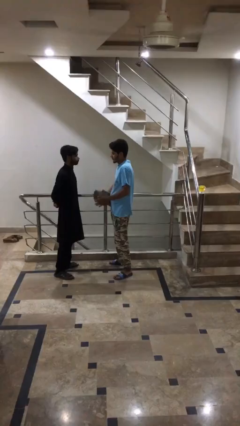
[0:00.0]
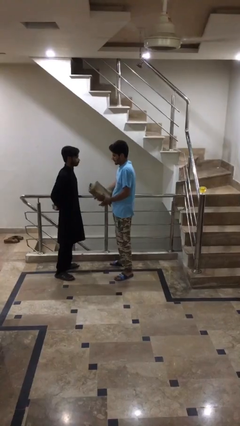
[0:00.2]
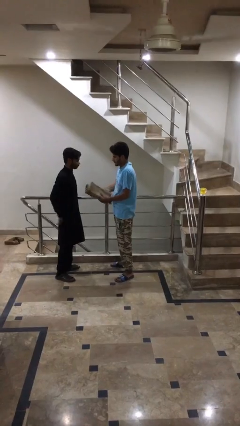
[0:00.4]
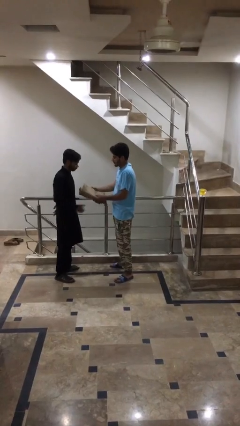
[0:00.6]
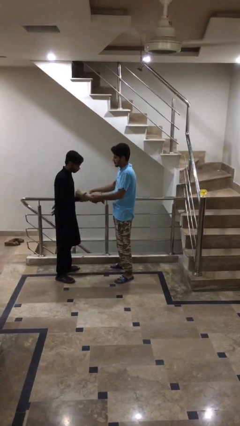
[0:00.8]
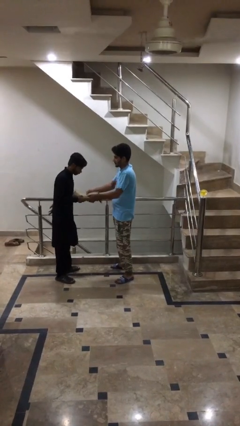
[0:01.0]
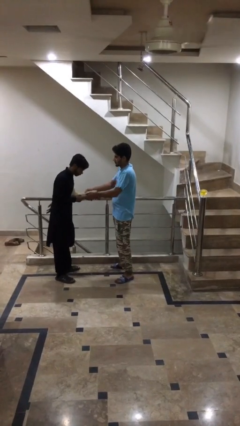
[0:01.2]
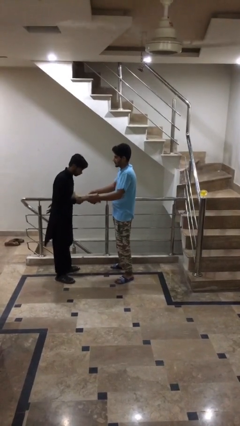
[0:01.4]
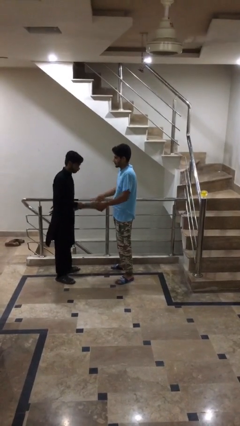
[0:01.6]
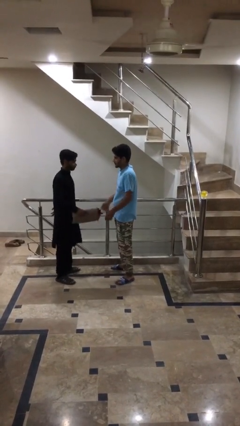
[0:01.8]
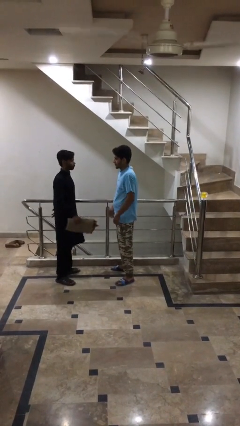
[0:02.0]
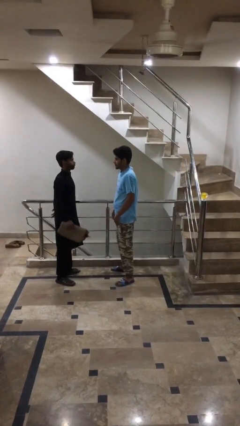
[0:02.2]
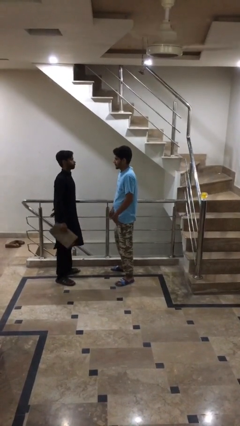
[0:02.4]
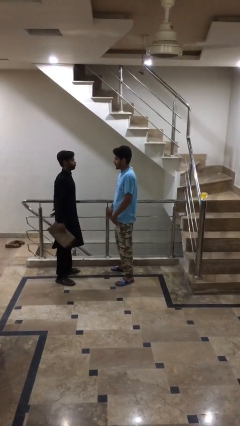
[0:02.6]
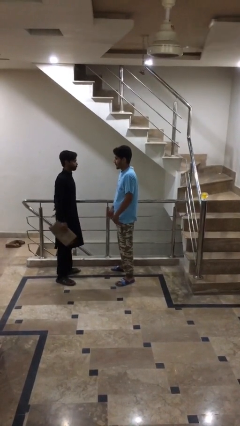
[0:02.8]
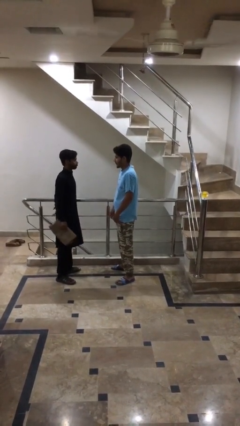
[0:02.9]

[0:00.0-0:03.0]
person transfers object to person

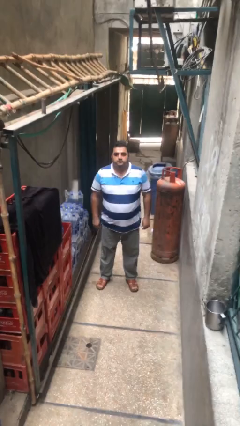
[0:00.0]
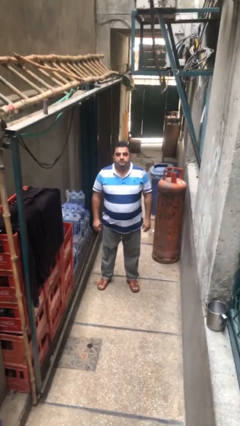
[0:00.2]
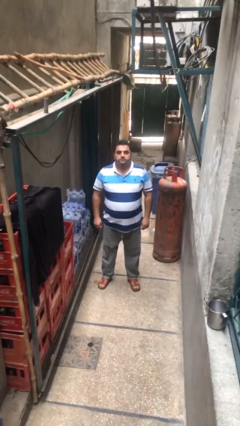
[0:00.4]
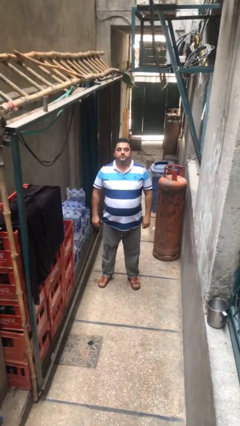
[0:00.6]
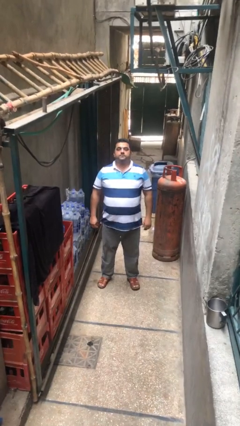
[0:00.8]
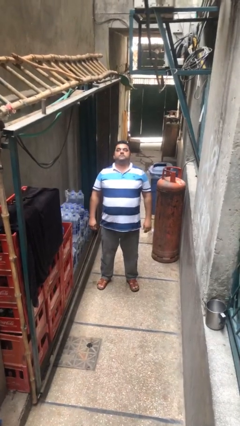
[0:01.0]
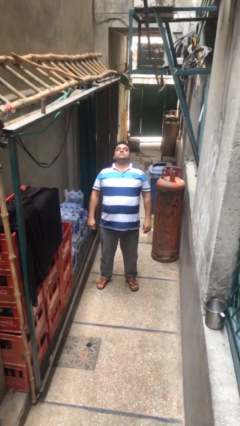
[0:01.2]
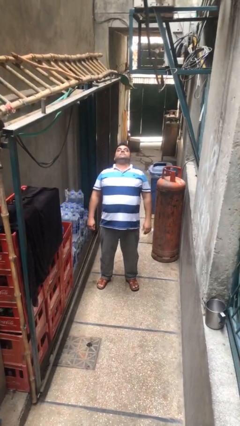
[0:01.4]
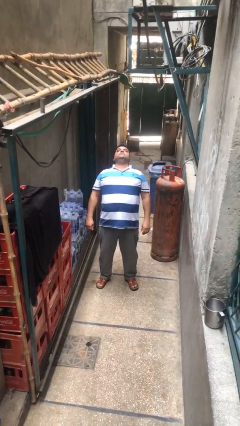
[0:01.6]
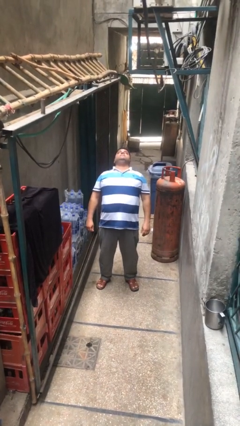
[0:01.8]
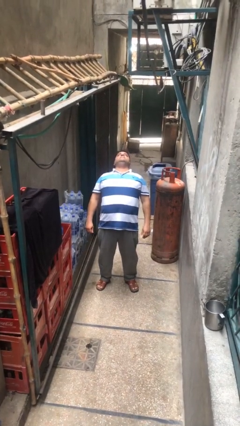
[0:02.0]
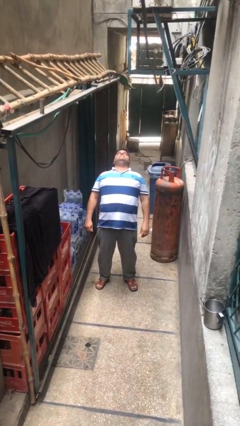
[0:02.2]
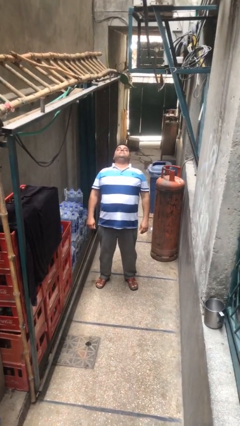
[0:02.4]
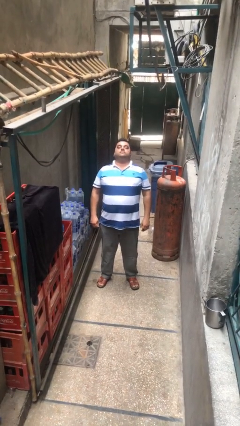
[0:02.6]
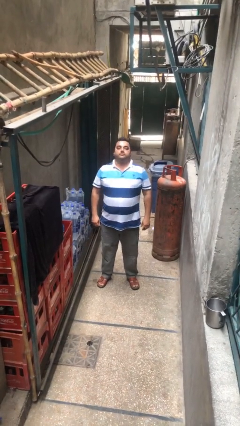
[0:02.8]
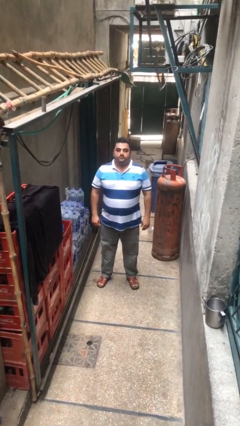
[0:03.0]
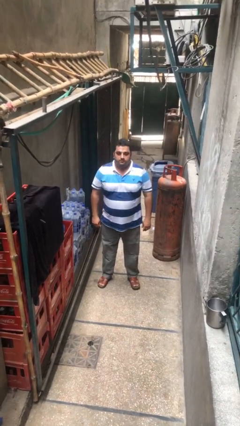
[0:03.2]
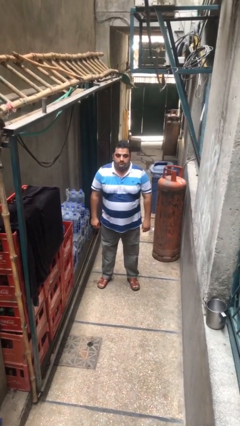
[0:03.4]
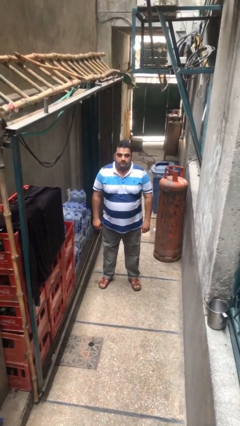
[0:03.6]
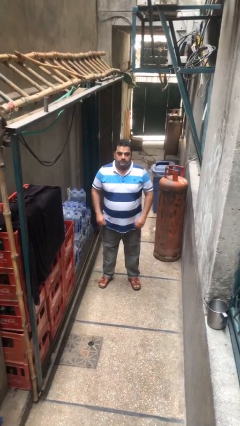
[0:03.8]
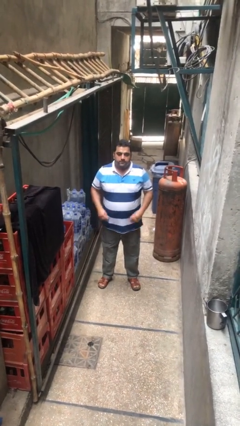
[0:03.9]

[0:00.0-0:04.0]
person stretches back

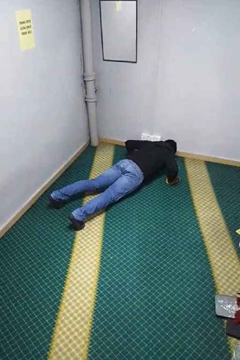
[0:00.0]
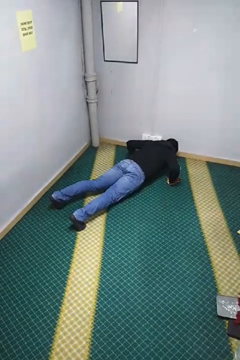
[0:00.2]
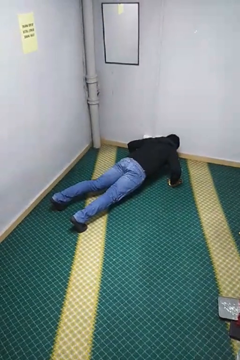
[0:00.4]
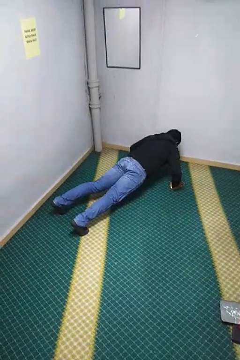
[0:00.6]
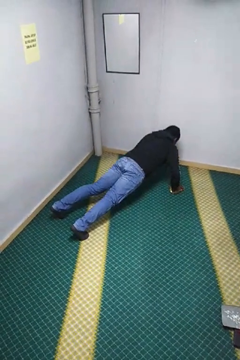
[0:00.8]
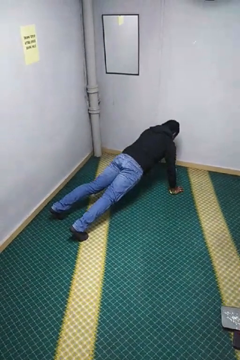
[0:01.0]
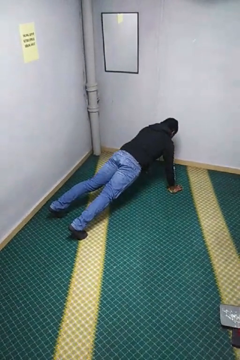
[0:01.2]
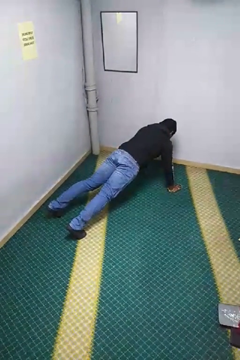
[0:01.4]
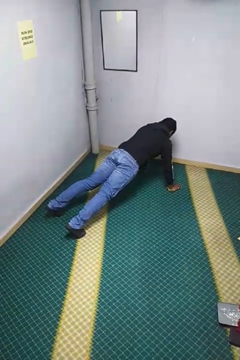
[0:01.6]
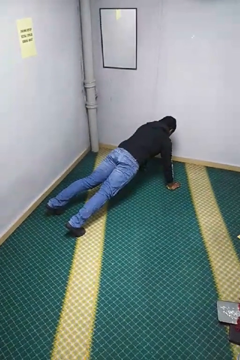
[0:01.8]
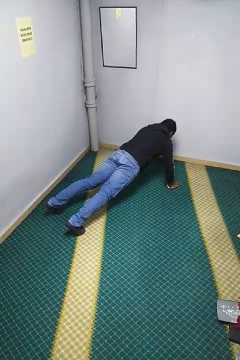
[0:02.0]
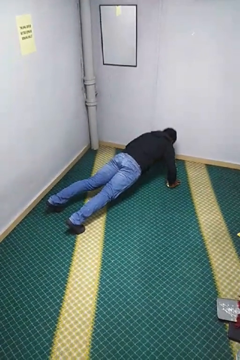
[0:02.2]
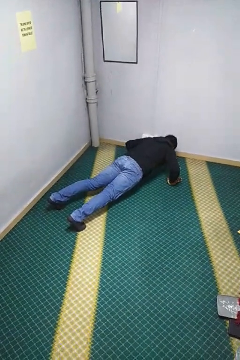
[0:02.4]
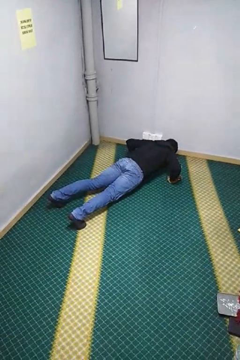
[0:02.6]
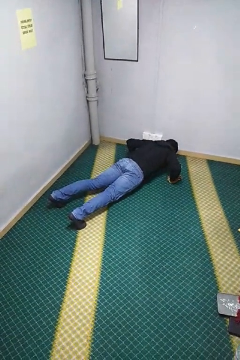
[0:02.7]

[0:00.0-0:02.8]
person exercises with pushup

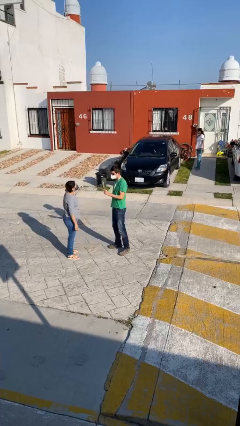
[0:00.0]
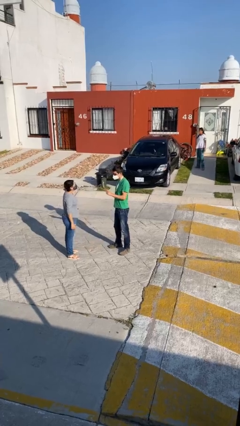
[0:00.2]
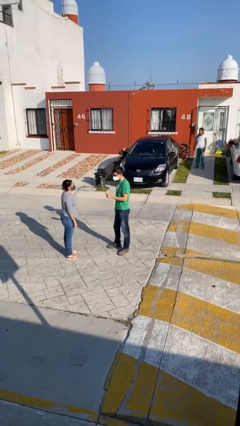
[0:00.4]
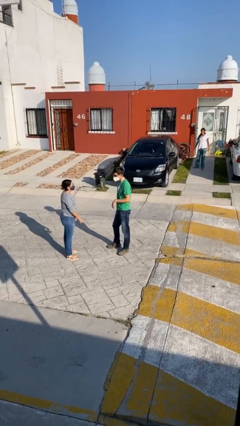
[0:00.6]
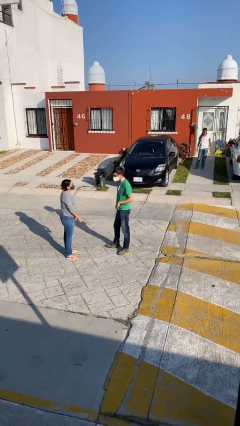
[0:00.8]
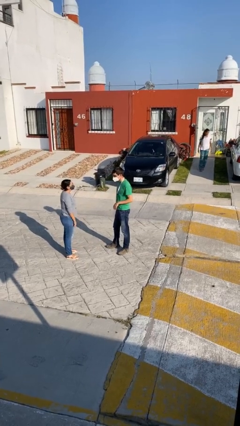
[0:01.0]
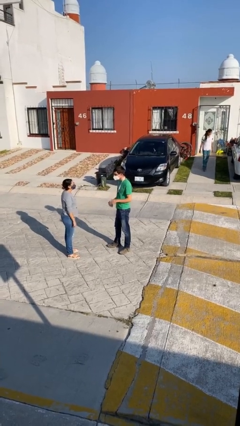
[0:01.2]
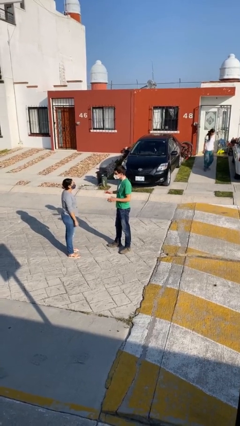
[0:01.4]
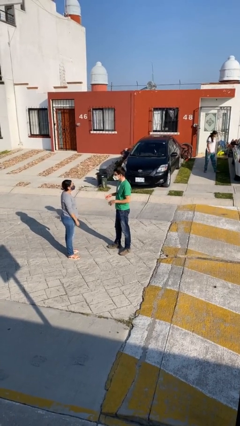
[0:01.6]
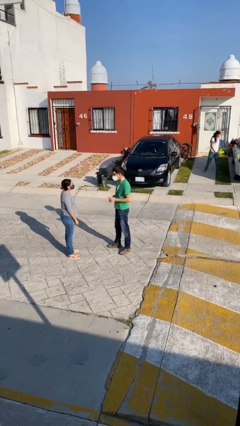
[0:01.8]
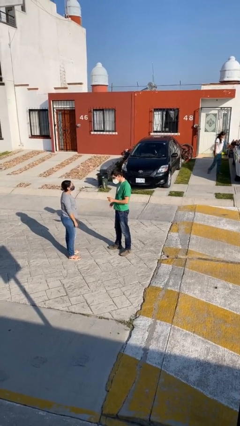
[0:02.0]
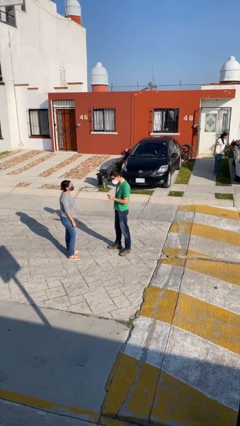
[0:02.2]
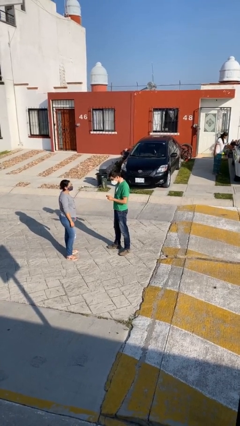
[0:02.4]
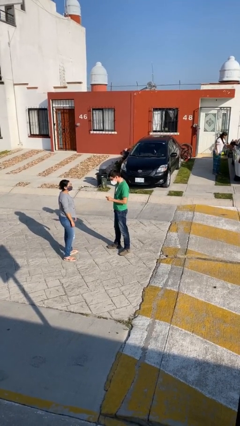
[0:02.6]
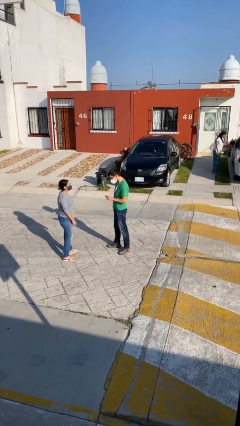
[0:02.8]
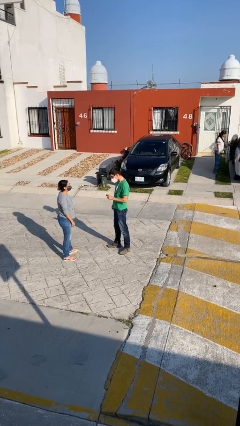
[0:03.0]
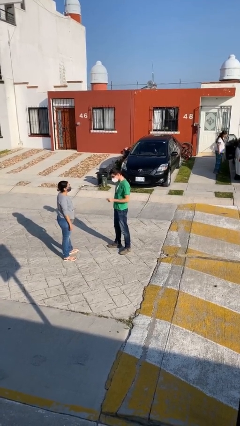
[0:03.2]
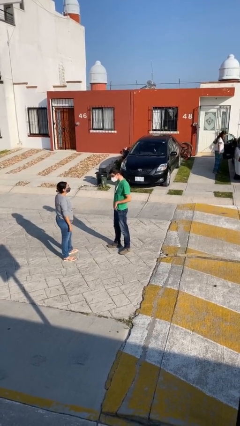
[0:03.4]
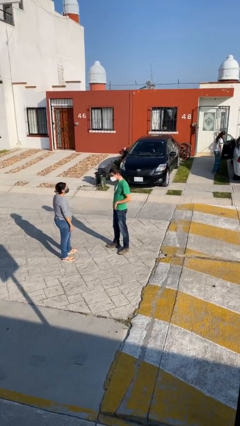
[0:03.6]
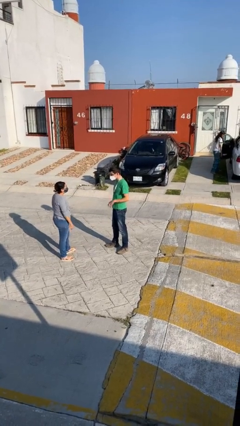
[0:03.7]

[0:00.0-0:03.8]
person talks to person

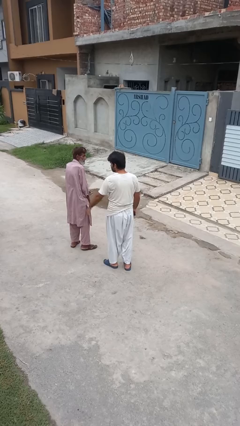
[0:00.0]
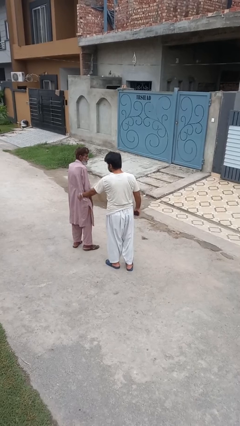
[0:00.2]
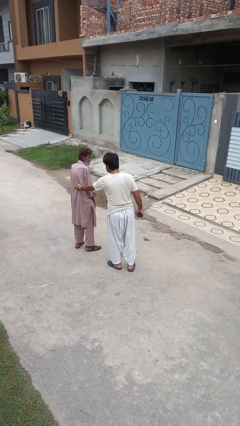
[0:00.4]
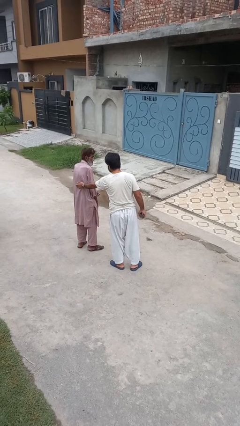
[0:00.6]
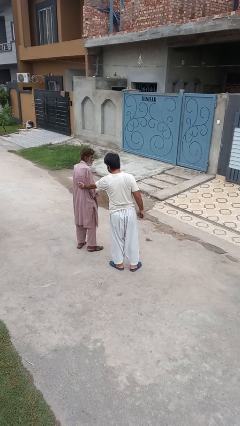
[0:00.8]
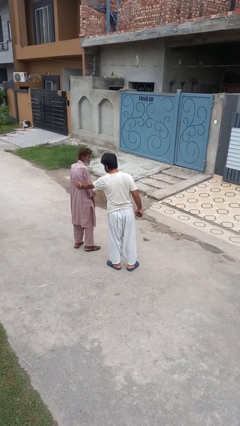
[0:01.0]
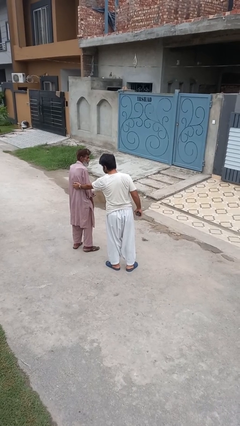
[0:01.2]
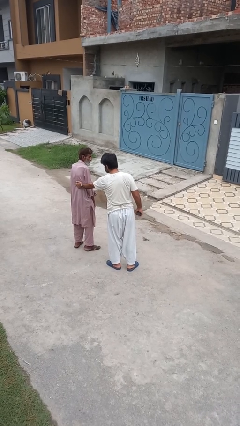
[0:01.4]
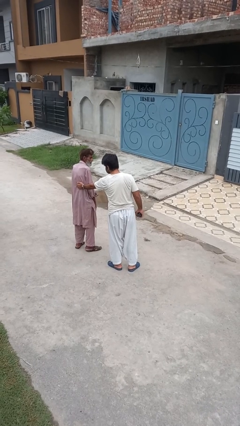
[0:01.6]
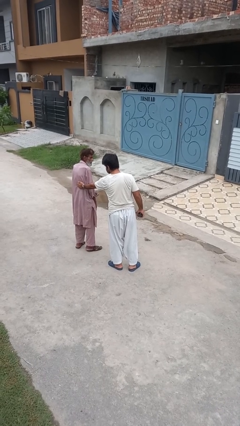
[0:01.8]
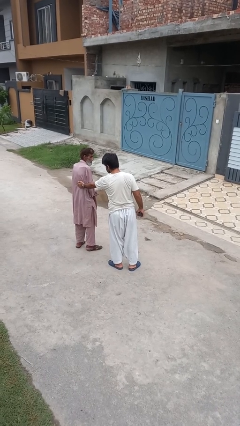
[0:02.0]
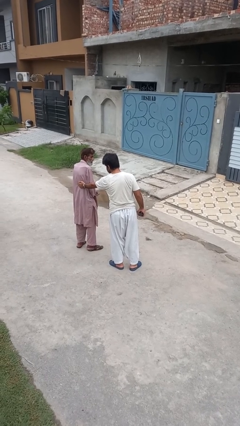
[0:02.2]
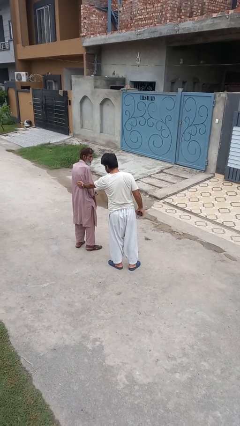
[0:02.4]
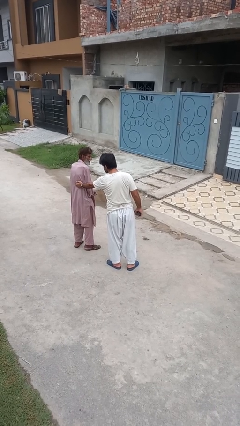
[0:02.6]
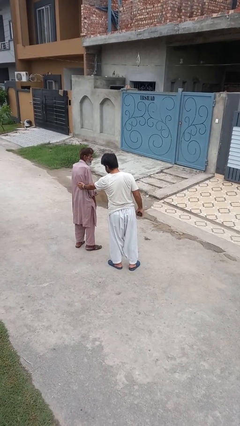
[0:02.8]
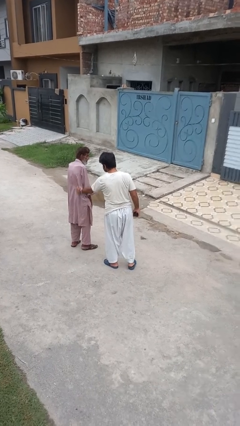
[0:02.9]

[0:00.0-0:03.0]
person touches back of person

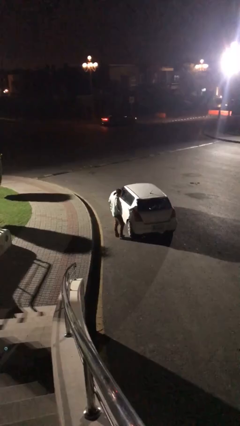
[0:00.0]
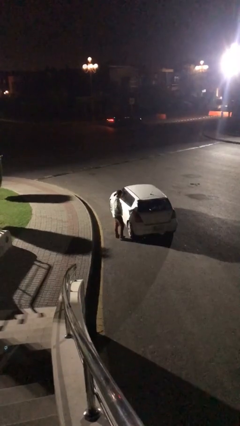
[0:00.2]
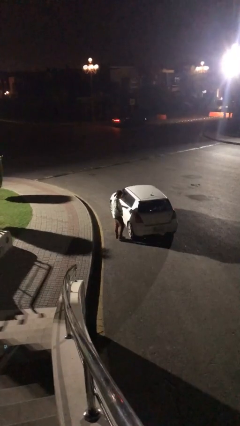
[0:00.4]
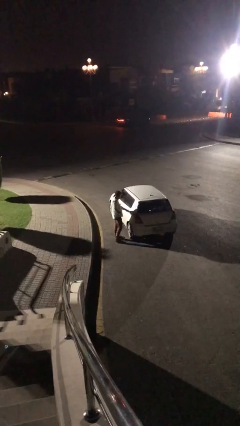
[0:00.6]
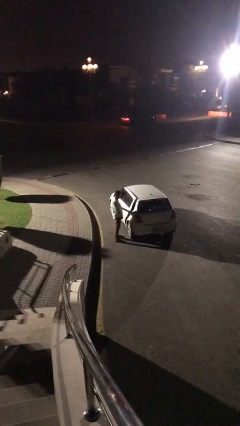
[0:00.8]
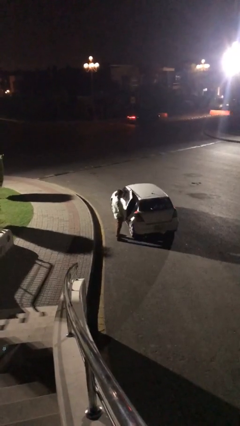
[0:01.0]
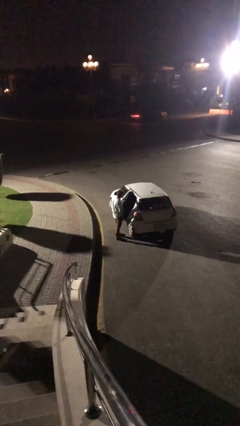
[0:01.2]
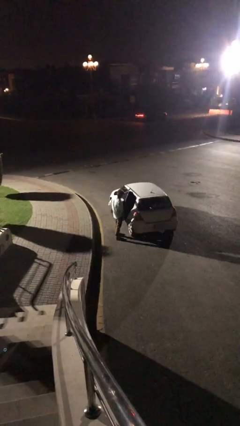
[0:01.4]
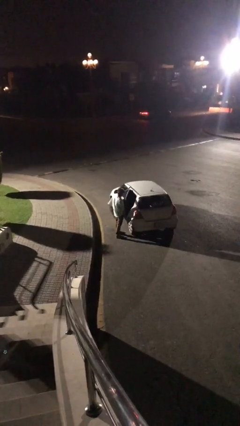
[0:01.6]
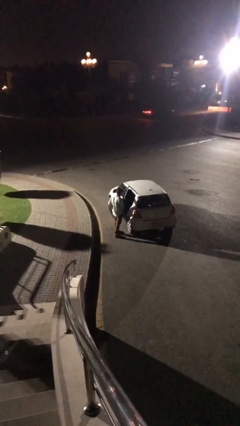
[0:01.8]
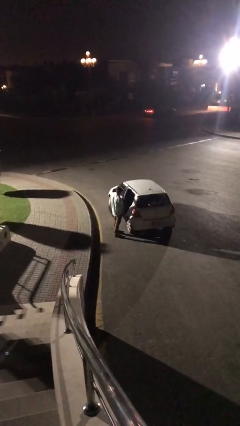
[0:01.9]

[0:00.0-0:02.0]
person opens car door
